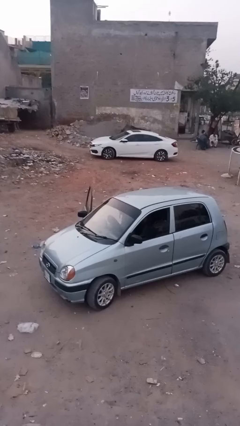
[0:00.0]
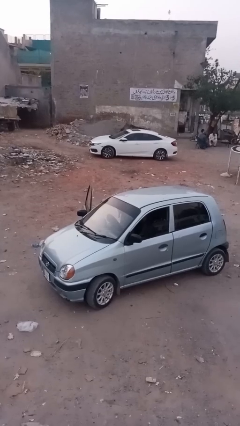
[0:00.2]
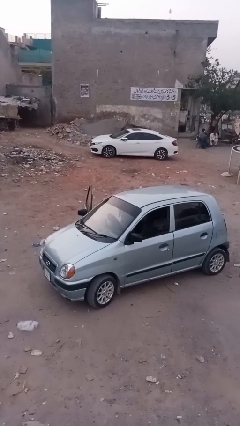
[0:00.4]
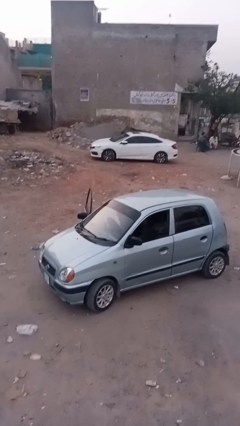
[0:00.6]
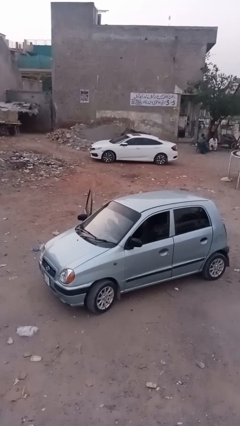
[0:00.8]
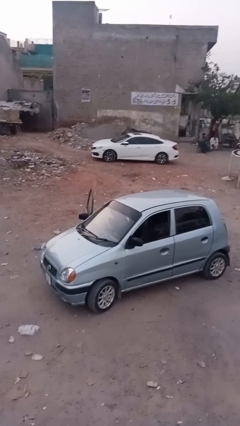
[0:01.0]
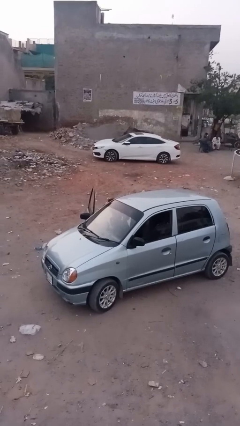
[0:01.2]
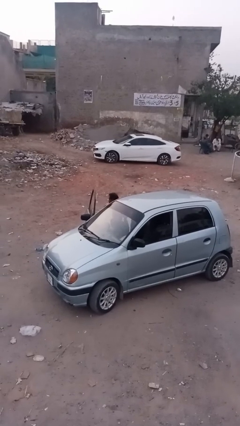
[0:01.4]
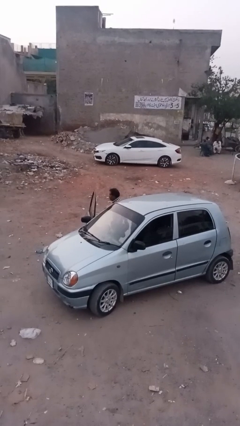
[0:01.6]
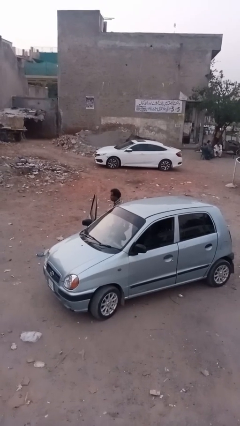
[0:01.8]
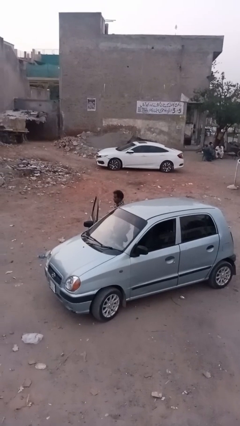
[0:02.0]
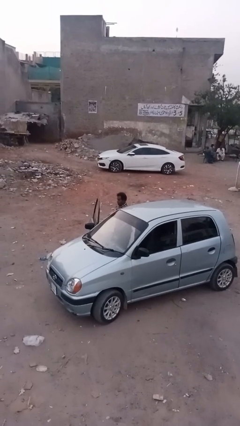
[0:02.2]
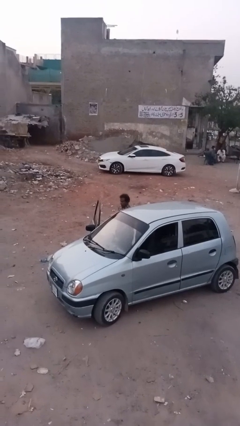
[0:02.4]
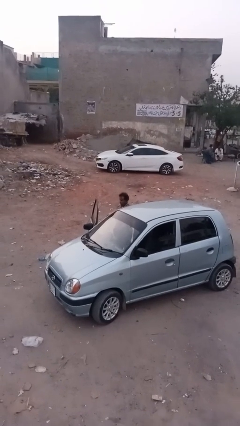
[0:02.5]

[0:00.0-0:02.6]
person exits car

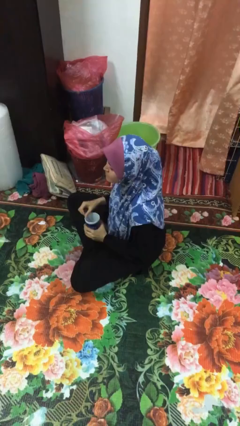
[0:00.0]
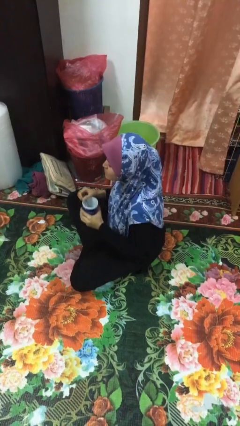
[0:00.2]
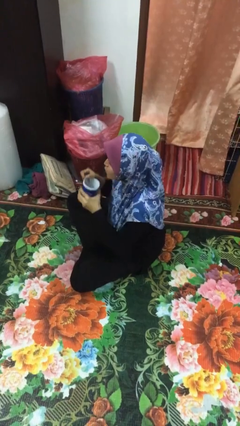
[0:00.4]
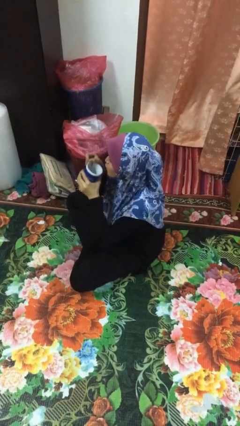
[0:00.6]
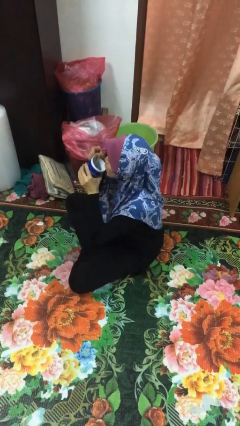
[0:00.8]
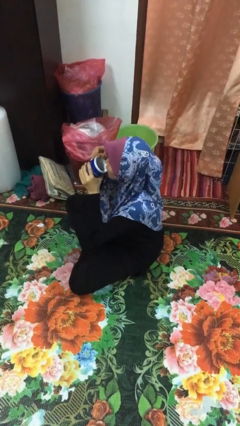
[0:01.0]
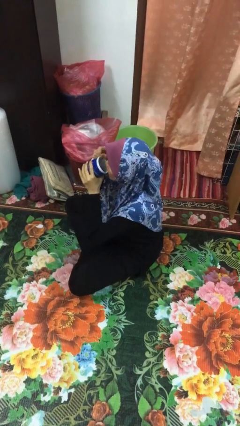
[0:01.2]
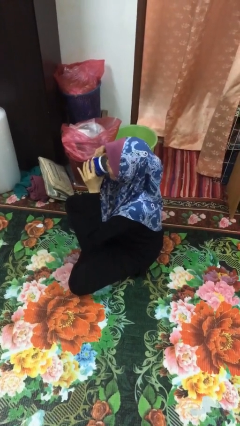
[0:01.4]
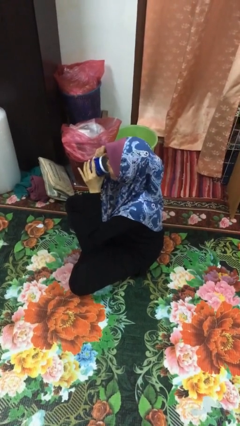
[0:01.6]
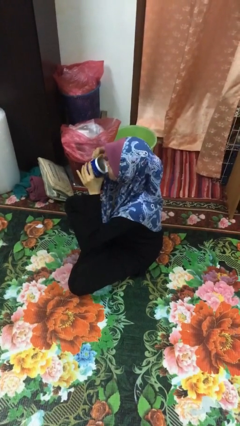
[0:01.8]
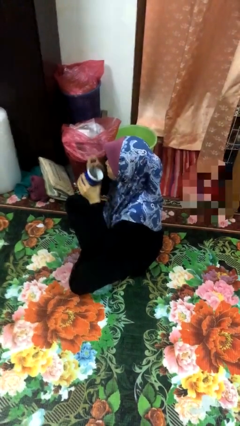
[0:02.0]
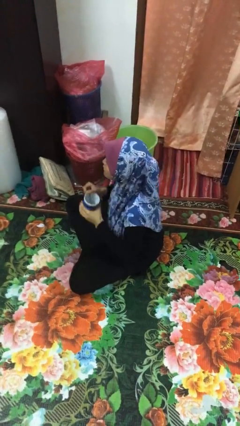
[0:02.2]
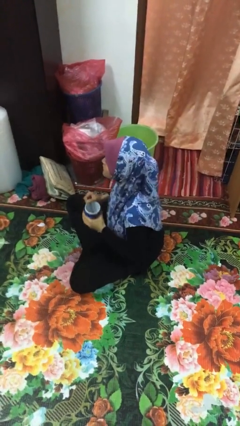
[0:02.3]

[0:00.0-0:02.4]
person drinks from mug

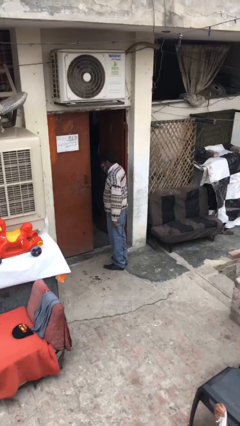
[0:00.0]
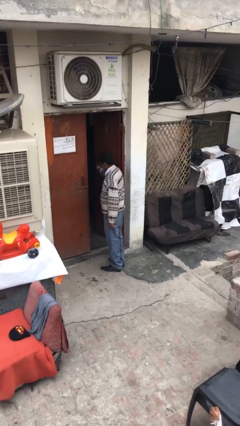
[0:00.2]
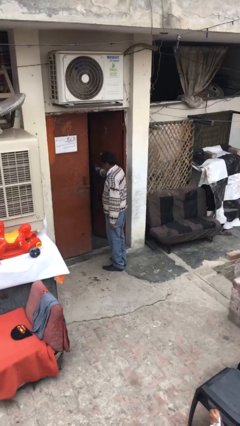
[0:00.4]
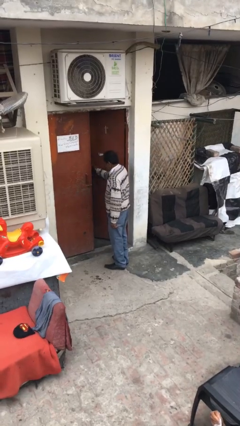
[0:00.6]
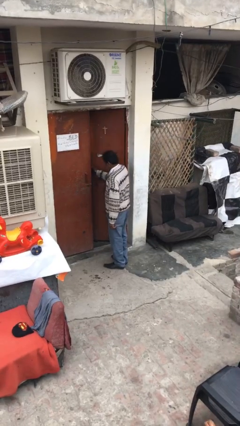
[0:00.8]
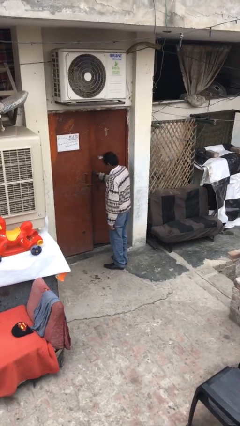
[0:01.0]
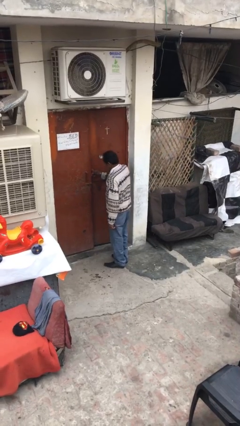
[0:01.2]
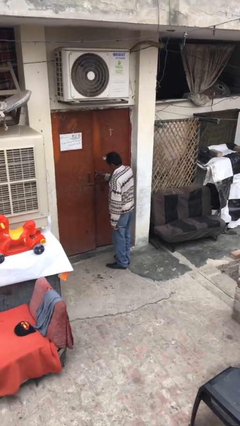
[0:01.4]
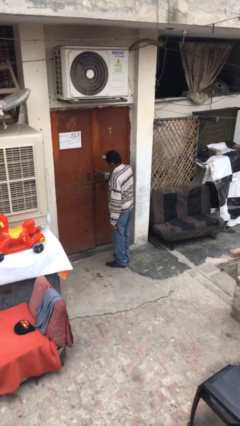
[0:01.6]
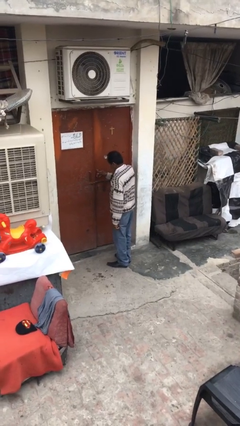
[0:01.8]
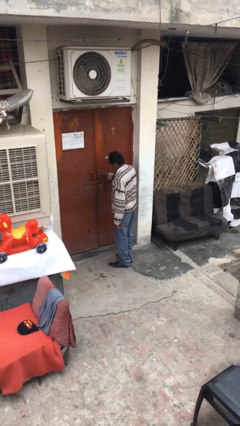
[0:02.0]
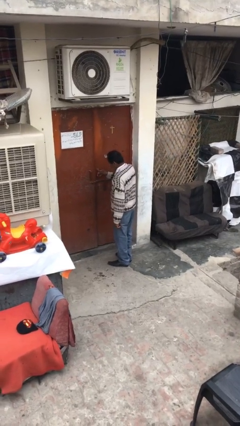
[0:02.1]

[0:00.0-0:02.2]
person closes facility door

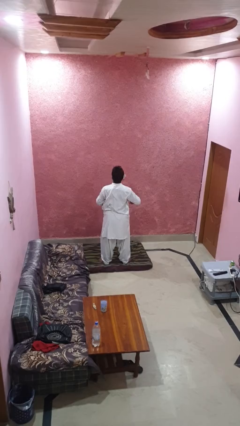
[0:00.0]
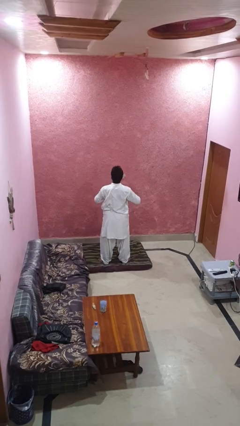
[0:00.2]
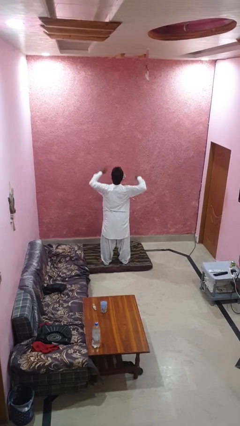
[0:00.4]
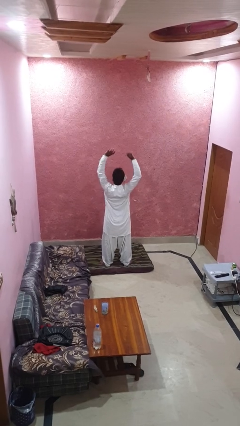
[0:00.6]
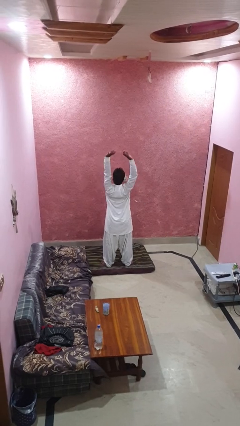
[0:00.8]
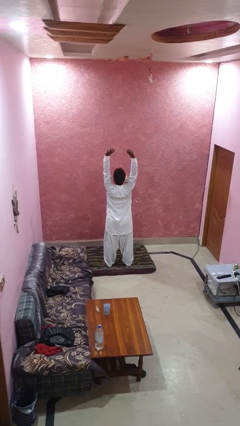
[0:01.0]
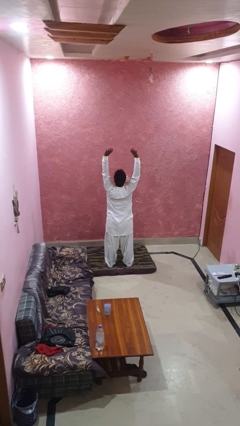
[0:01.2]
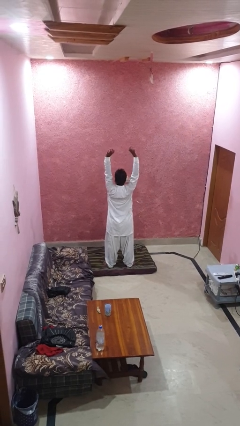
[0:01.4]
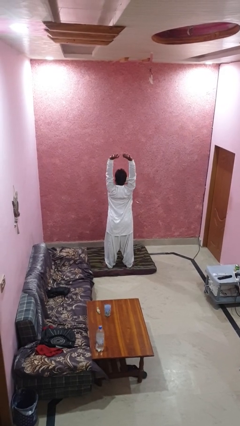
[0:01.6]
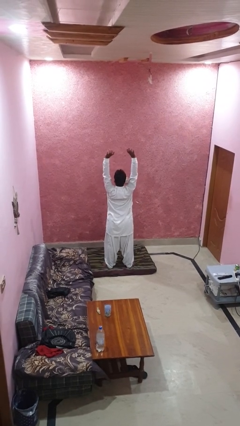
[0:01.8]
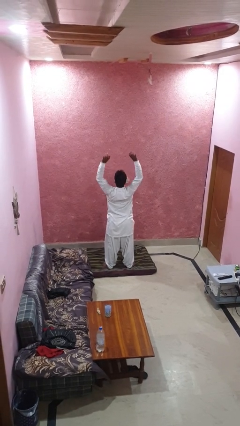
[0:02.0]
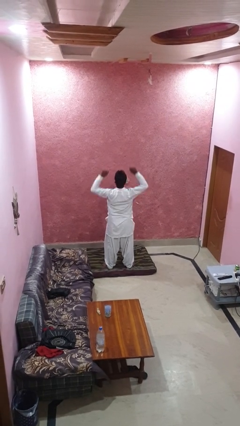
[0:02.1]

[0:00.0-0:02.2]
person stretches arms over head

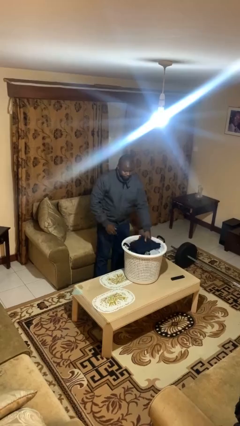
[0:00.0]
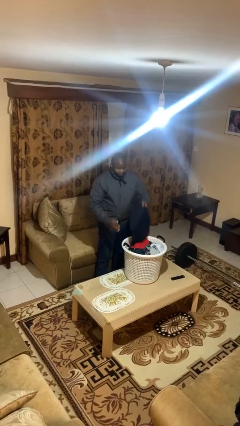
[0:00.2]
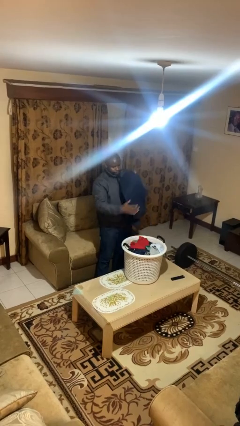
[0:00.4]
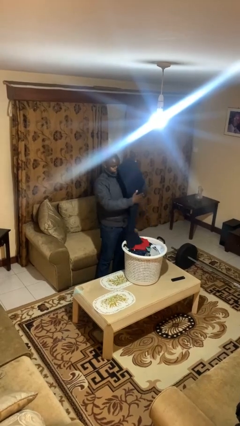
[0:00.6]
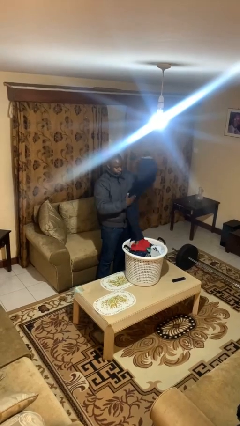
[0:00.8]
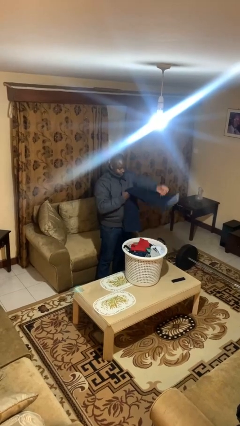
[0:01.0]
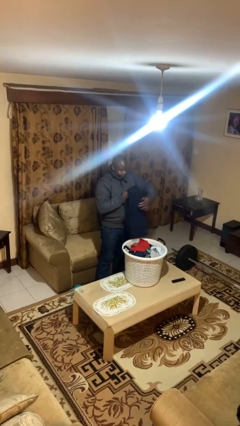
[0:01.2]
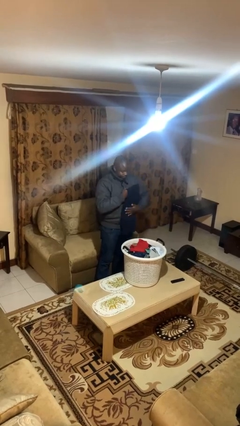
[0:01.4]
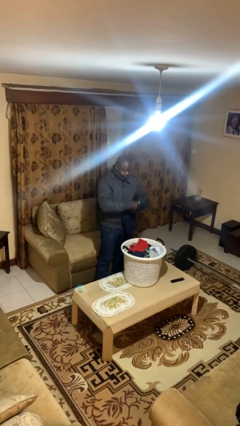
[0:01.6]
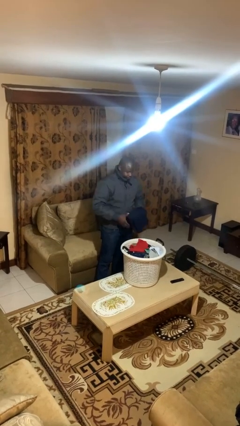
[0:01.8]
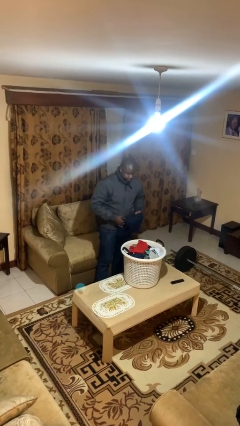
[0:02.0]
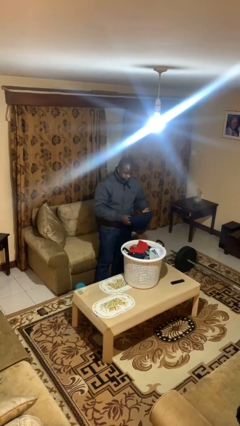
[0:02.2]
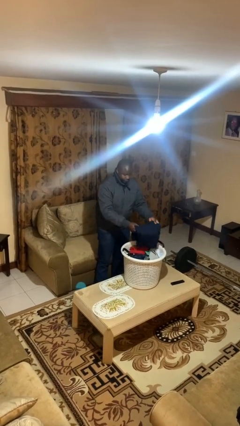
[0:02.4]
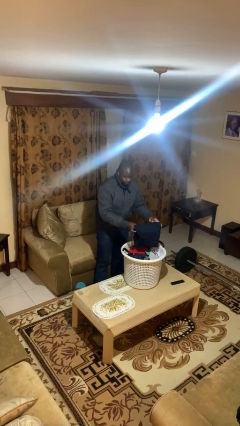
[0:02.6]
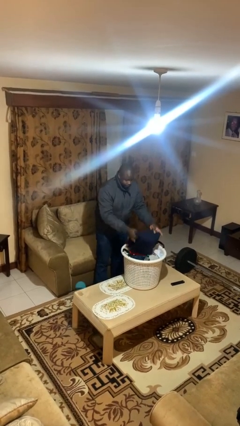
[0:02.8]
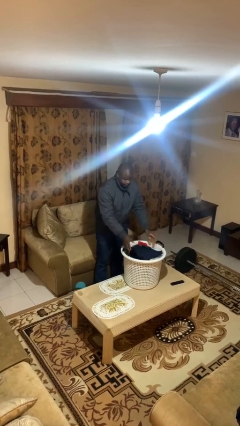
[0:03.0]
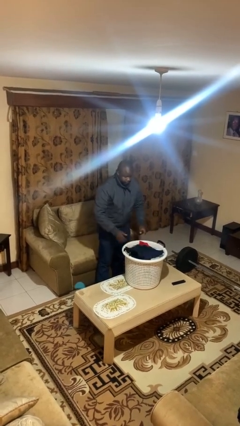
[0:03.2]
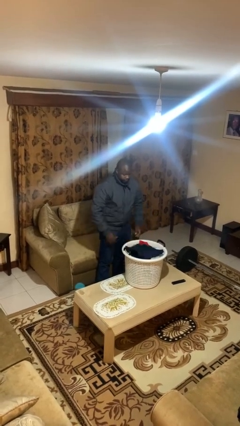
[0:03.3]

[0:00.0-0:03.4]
person folds pants

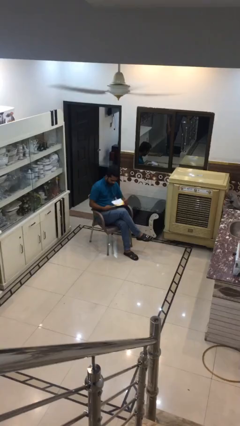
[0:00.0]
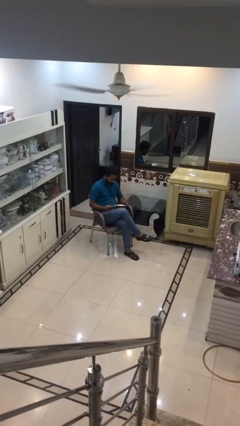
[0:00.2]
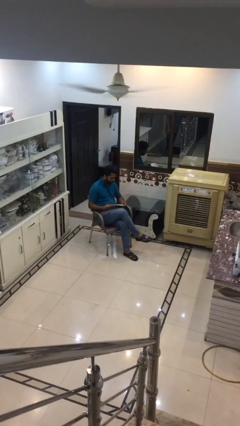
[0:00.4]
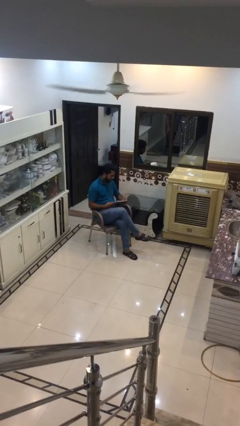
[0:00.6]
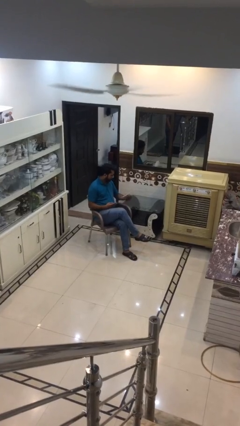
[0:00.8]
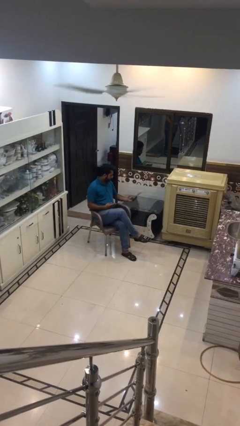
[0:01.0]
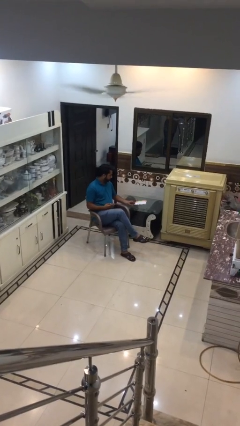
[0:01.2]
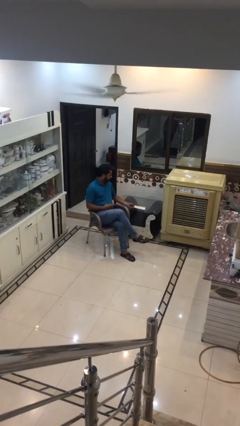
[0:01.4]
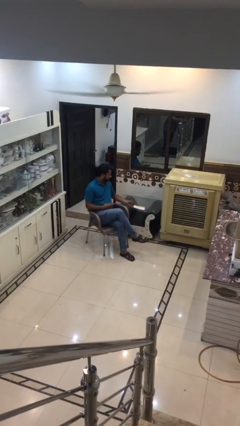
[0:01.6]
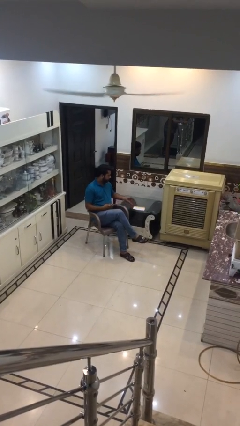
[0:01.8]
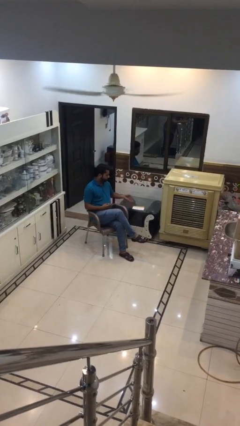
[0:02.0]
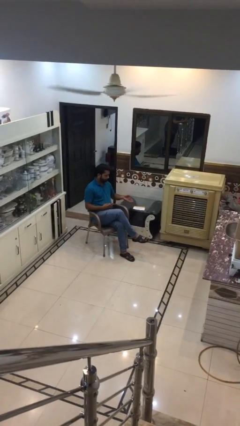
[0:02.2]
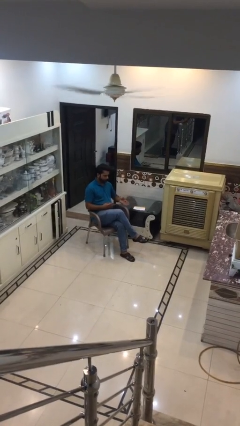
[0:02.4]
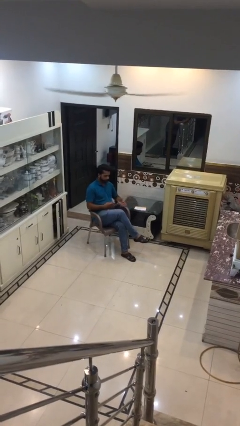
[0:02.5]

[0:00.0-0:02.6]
person puts down object on table

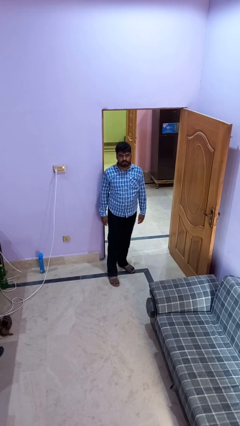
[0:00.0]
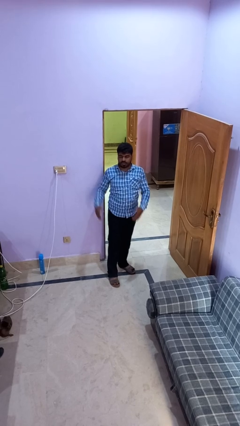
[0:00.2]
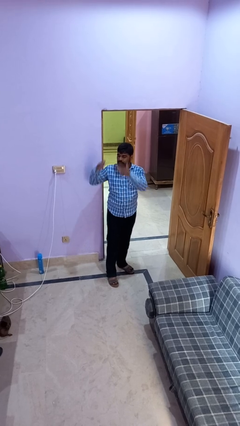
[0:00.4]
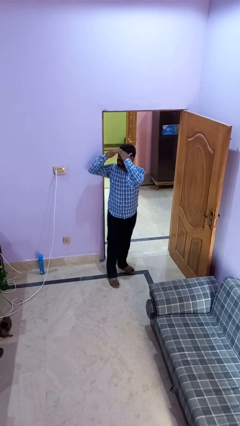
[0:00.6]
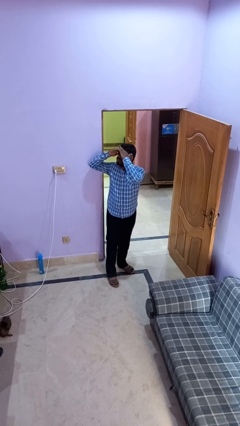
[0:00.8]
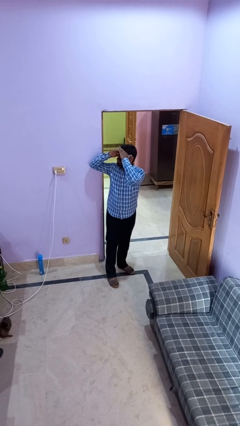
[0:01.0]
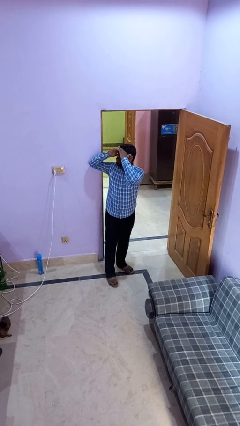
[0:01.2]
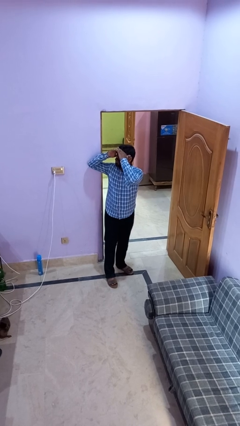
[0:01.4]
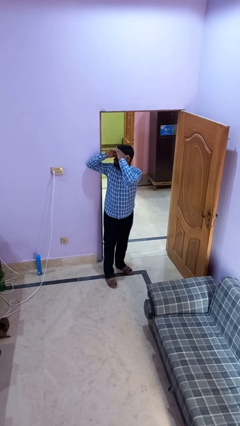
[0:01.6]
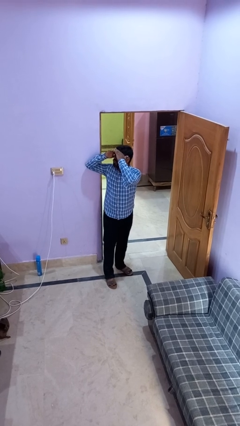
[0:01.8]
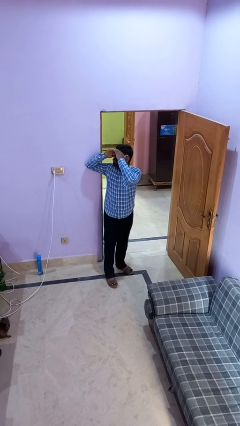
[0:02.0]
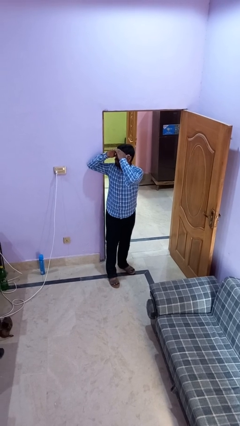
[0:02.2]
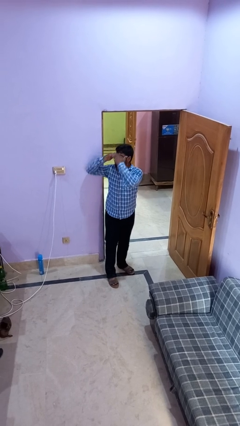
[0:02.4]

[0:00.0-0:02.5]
person shades eyes
